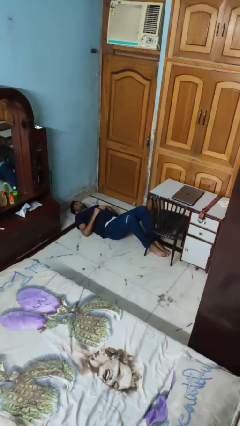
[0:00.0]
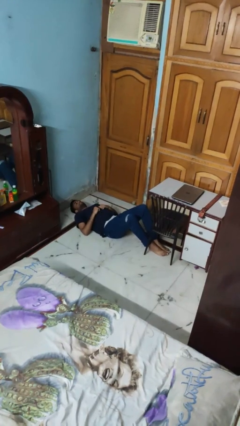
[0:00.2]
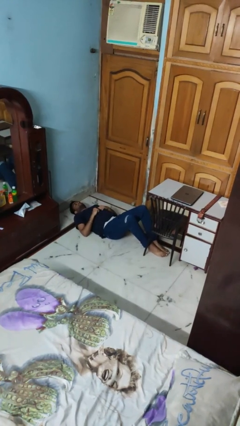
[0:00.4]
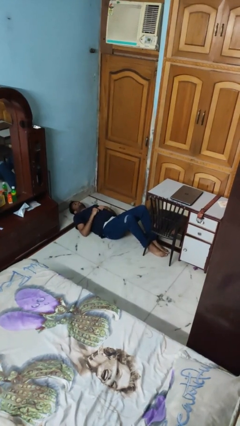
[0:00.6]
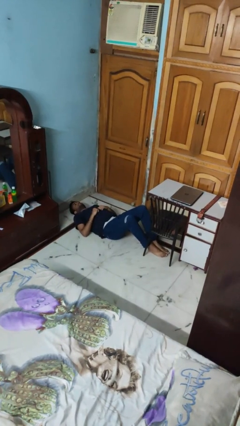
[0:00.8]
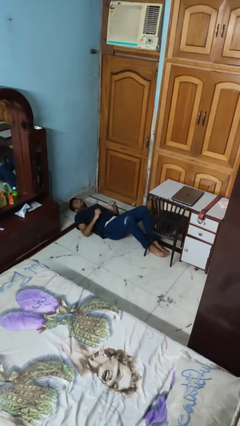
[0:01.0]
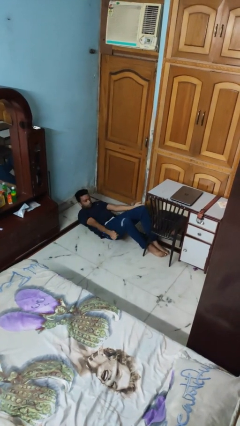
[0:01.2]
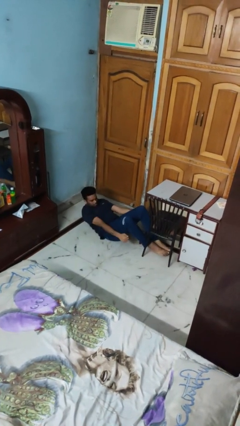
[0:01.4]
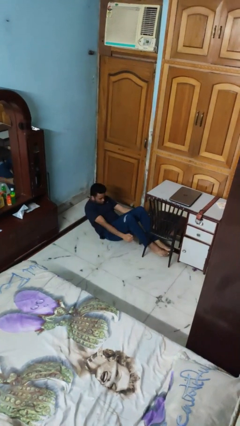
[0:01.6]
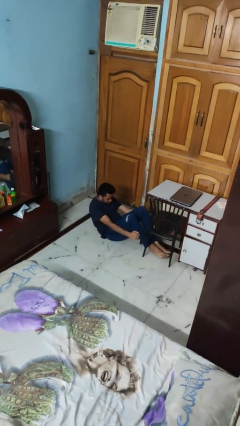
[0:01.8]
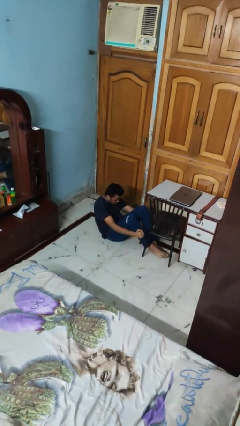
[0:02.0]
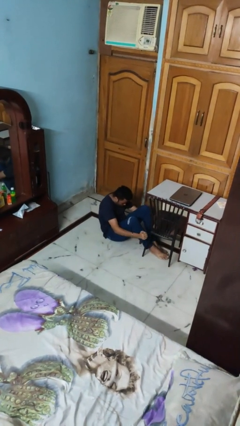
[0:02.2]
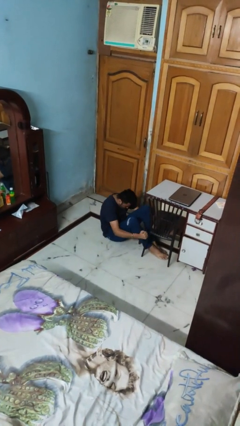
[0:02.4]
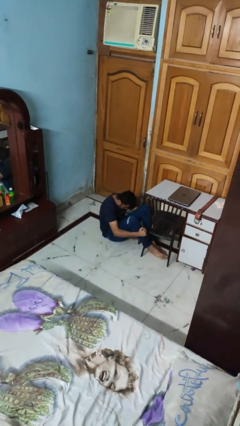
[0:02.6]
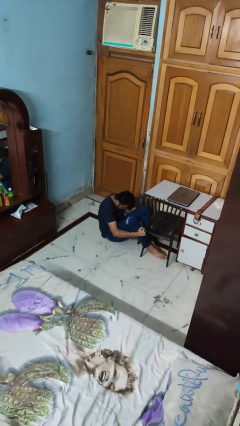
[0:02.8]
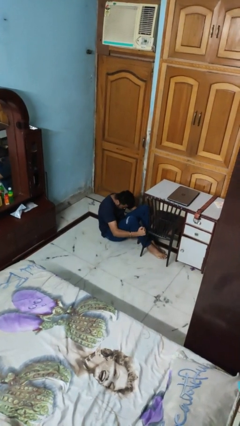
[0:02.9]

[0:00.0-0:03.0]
person exercises with situp

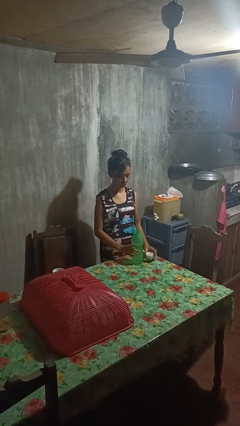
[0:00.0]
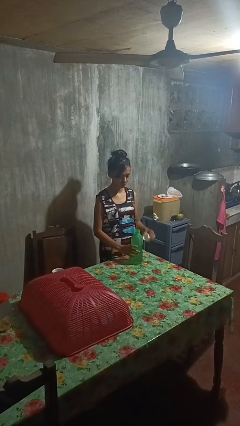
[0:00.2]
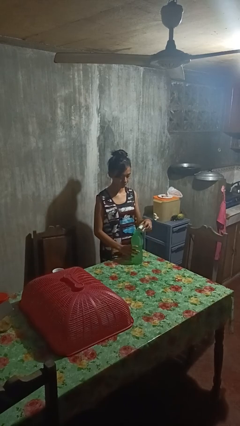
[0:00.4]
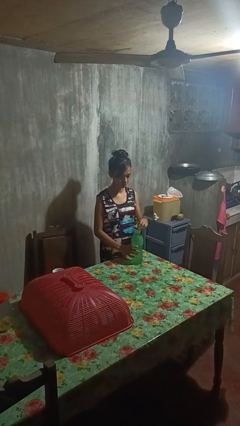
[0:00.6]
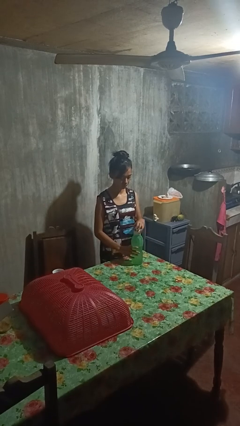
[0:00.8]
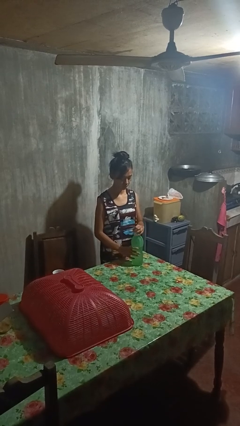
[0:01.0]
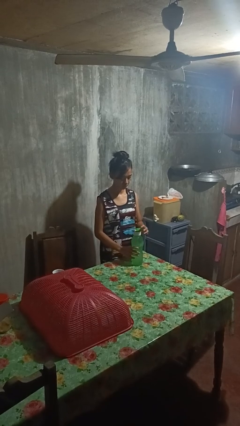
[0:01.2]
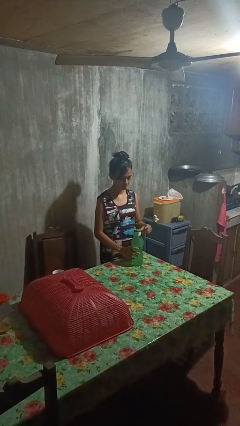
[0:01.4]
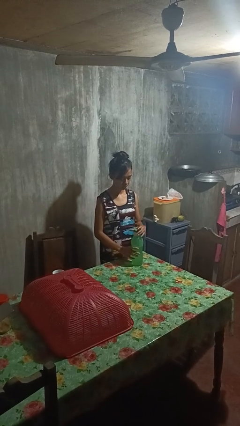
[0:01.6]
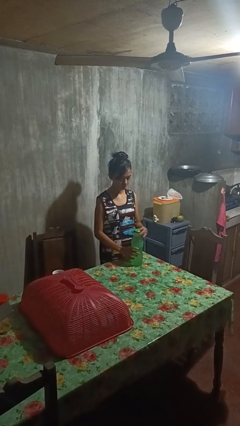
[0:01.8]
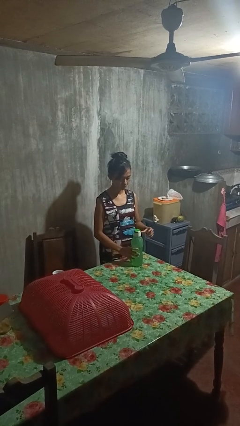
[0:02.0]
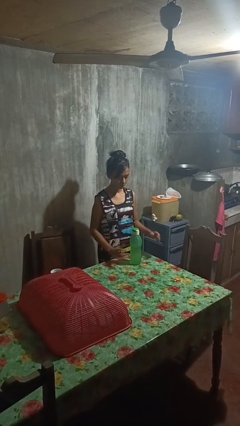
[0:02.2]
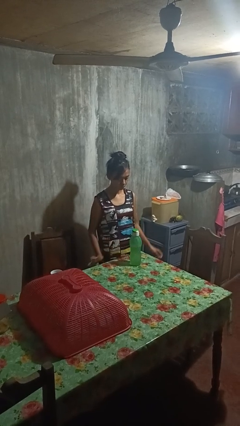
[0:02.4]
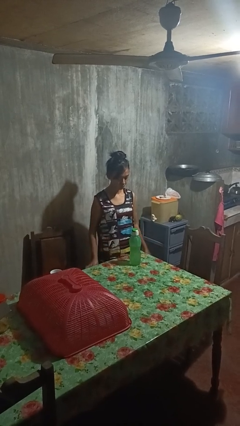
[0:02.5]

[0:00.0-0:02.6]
person screws lid to bottle

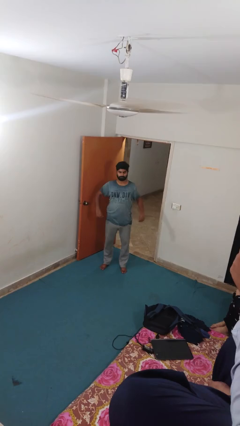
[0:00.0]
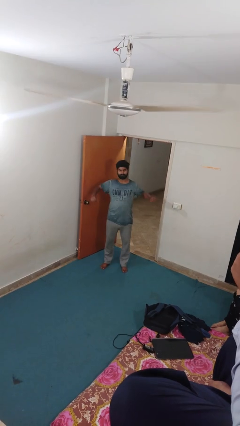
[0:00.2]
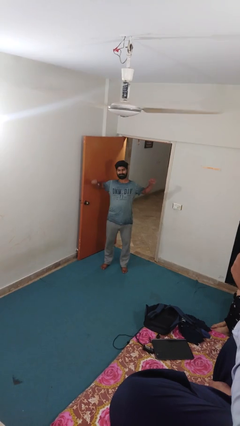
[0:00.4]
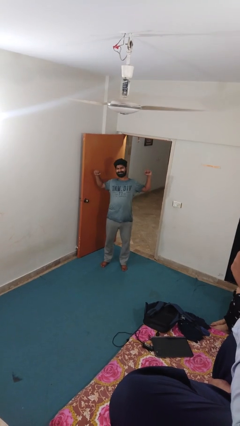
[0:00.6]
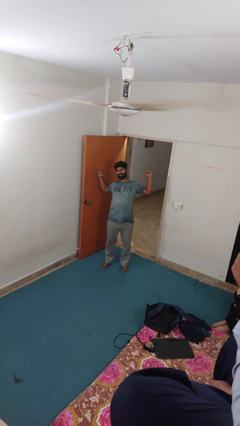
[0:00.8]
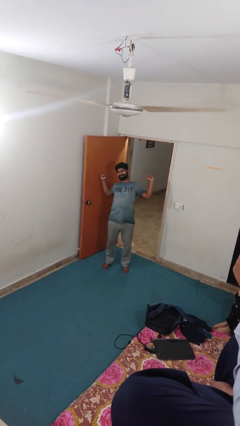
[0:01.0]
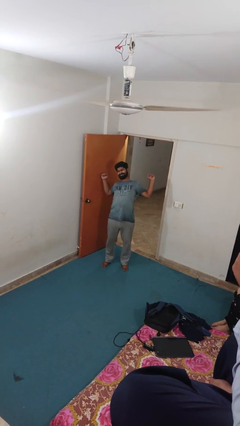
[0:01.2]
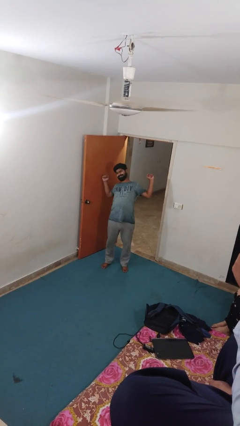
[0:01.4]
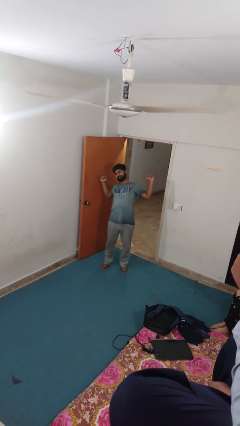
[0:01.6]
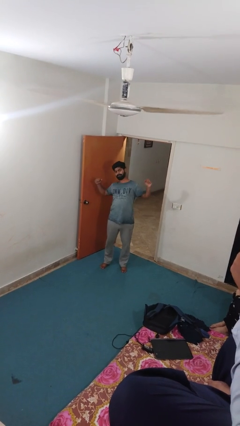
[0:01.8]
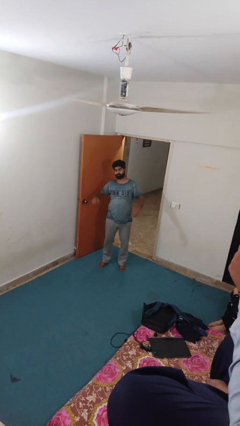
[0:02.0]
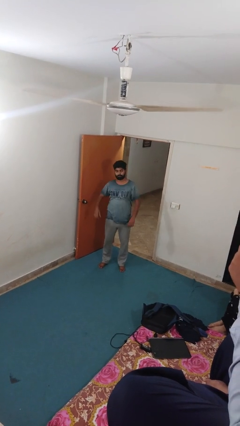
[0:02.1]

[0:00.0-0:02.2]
person stretches arms to side

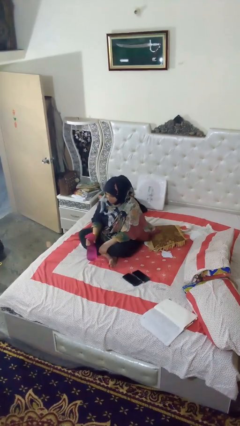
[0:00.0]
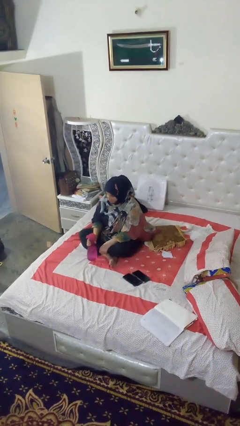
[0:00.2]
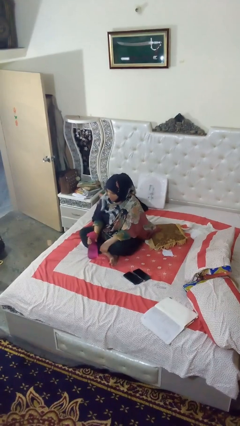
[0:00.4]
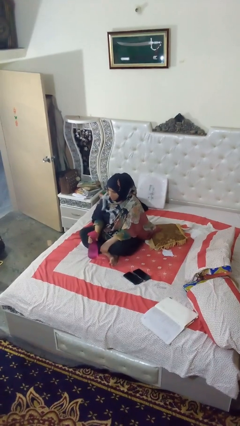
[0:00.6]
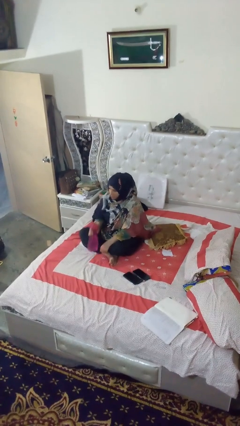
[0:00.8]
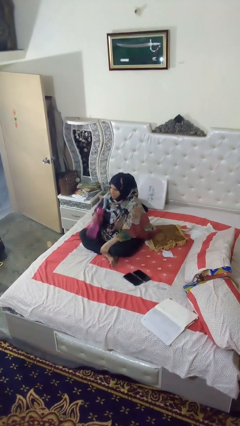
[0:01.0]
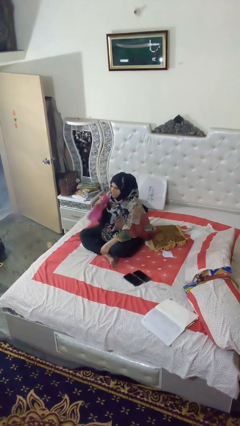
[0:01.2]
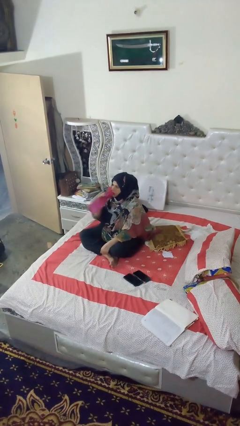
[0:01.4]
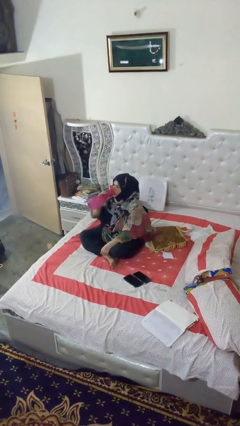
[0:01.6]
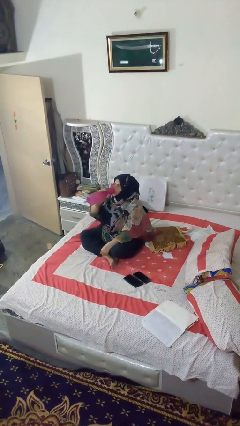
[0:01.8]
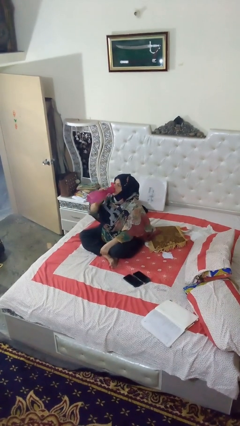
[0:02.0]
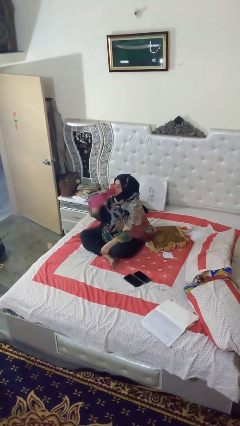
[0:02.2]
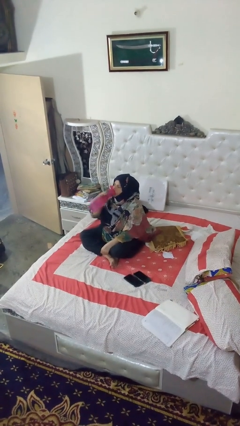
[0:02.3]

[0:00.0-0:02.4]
person drinks from bottle

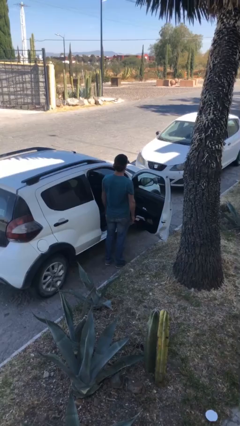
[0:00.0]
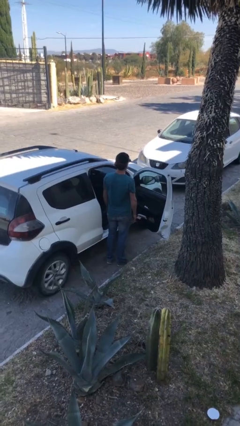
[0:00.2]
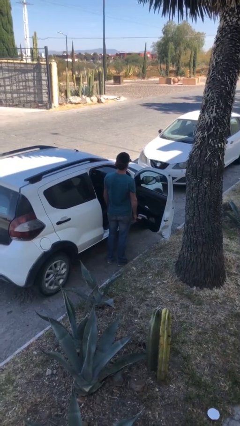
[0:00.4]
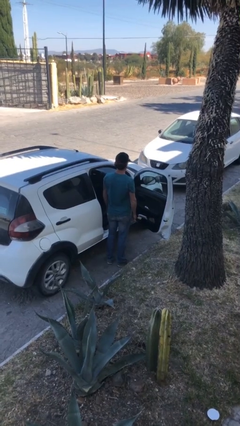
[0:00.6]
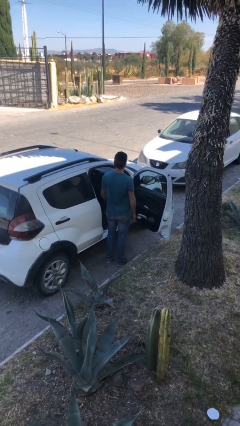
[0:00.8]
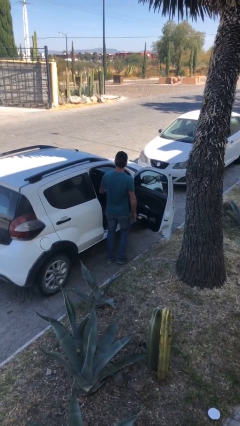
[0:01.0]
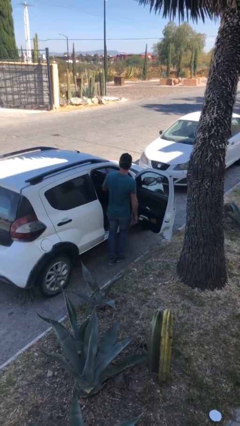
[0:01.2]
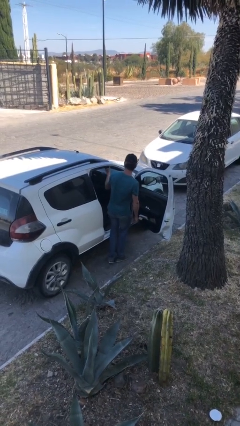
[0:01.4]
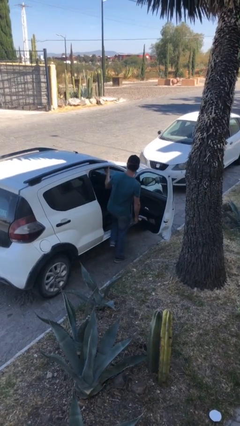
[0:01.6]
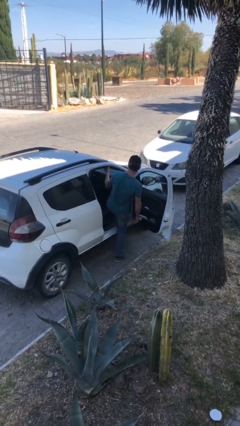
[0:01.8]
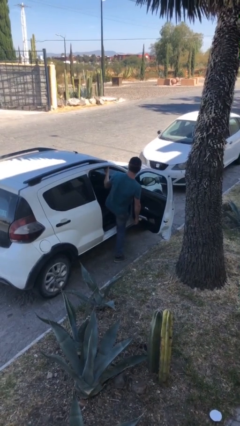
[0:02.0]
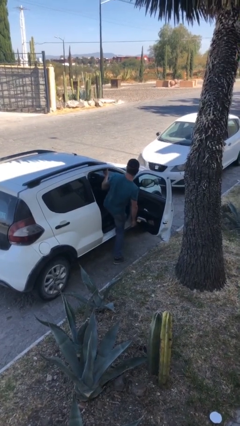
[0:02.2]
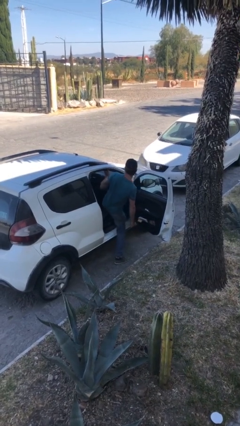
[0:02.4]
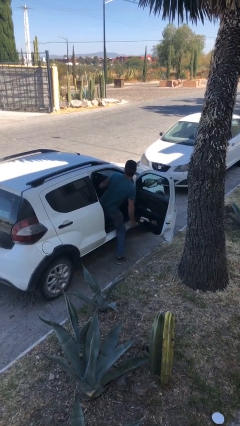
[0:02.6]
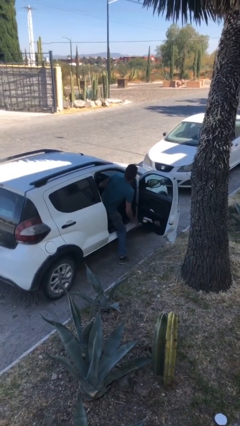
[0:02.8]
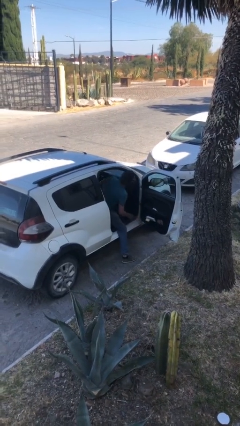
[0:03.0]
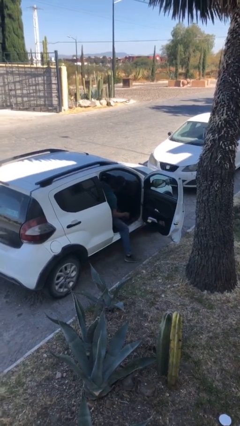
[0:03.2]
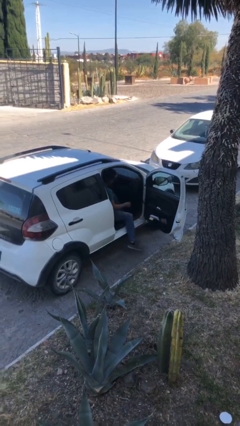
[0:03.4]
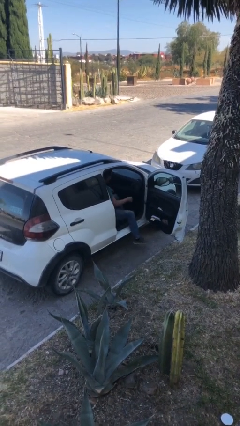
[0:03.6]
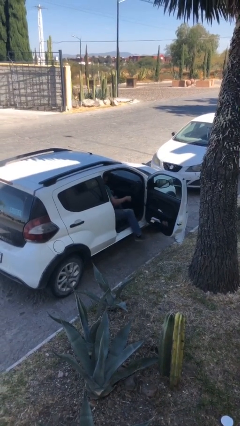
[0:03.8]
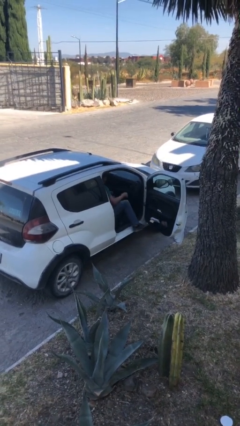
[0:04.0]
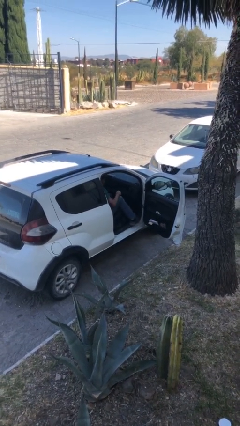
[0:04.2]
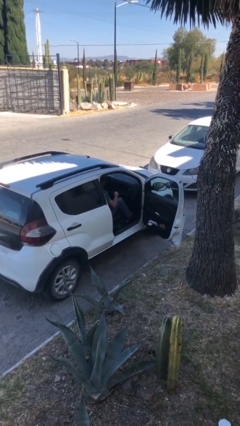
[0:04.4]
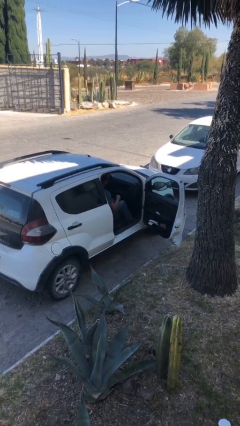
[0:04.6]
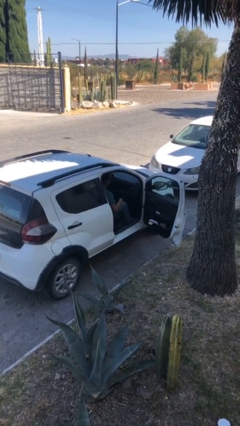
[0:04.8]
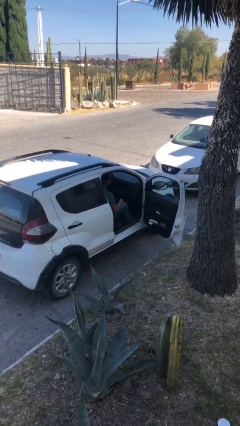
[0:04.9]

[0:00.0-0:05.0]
person enters car

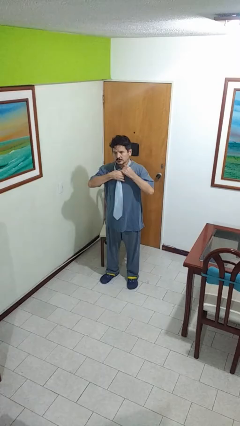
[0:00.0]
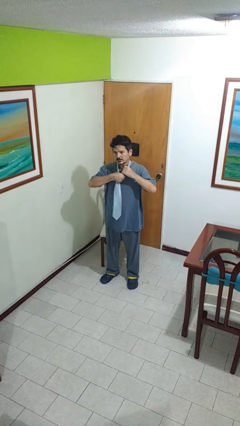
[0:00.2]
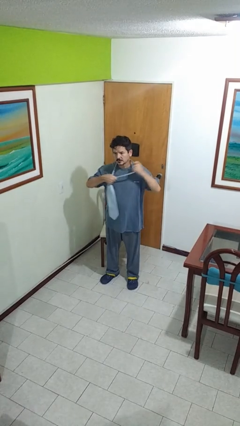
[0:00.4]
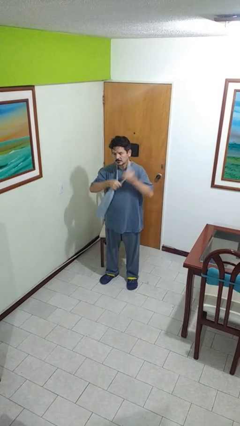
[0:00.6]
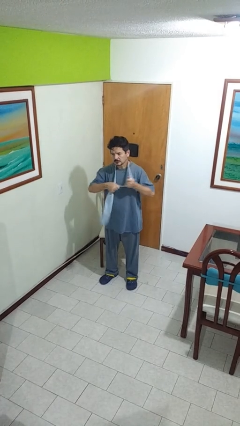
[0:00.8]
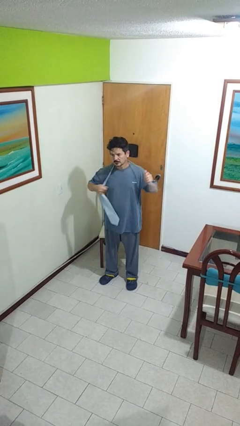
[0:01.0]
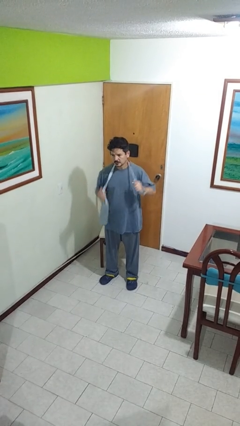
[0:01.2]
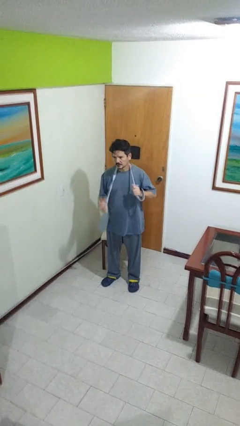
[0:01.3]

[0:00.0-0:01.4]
person takes off necktie

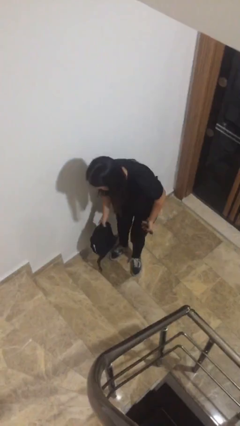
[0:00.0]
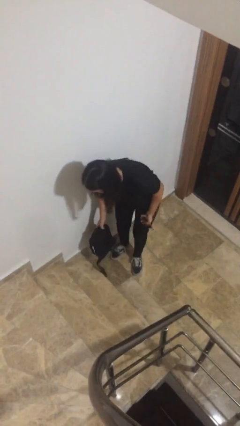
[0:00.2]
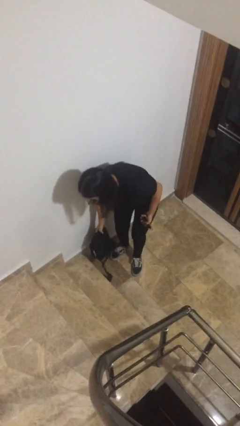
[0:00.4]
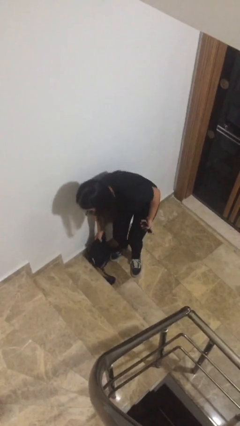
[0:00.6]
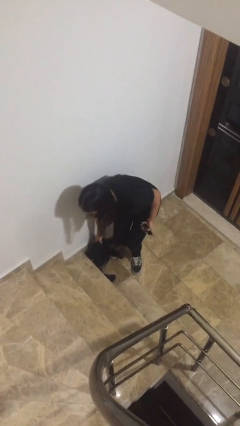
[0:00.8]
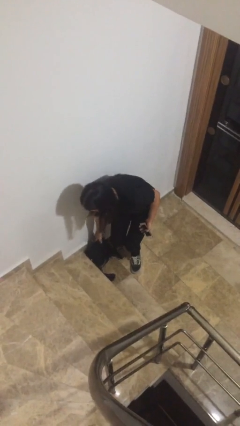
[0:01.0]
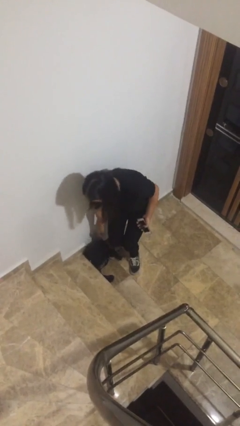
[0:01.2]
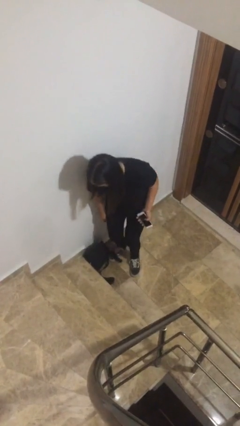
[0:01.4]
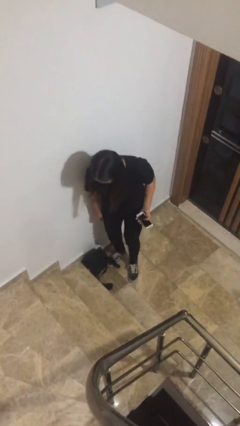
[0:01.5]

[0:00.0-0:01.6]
person puts down object on floor
